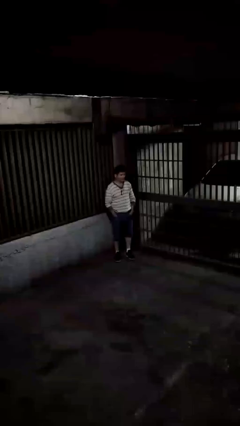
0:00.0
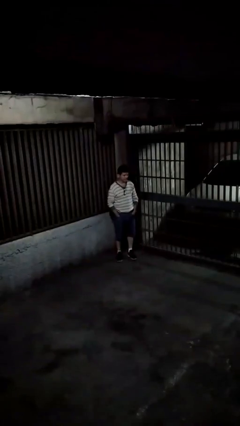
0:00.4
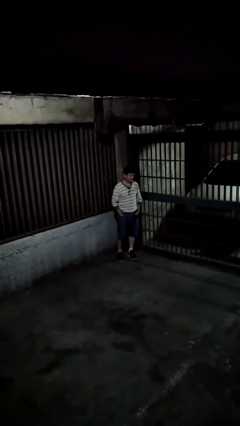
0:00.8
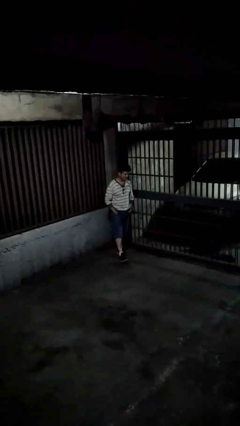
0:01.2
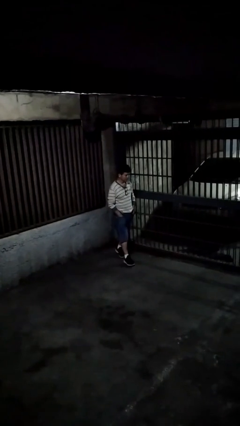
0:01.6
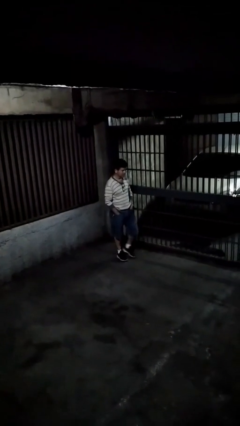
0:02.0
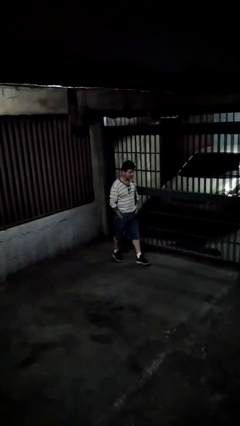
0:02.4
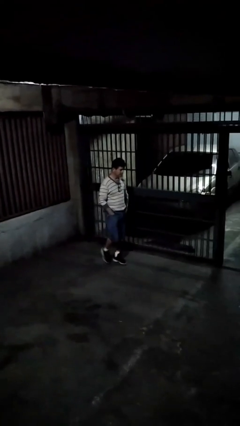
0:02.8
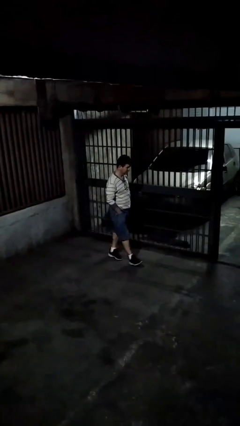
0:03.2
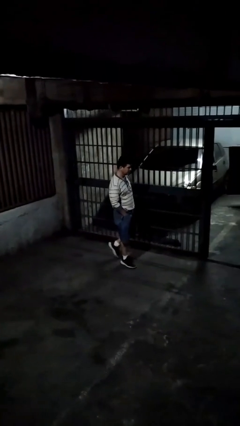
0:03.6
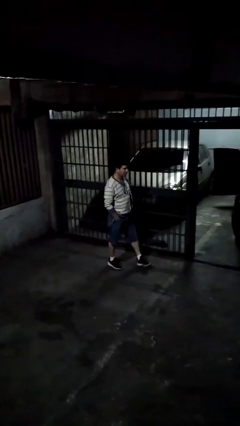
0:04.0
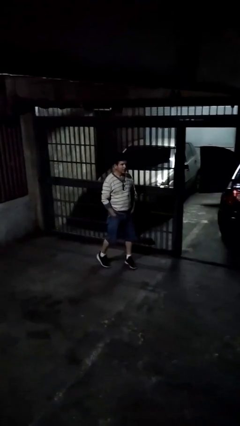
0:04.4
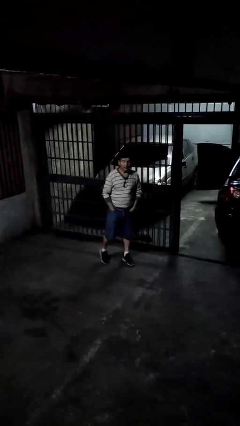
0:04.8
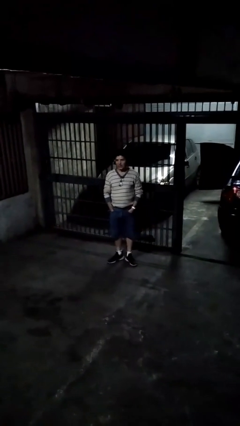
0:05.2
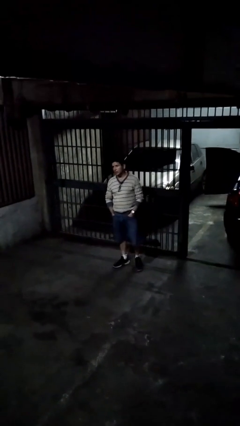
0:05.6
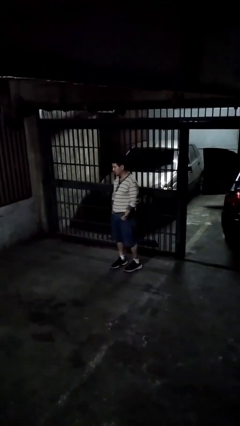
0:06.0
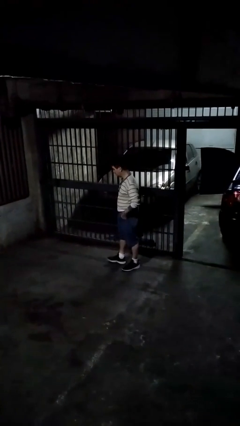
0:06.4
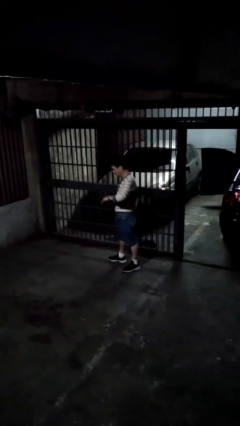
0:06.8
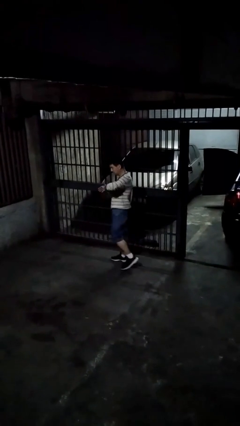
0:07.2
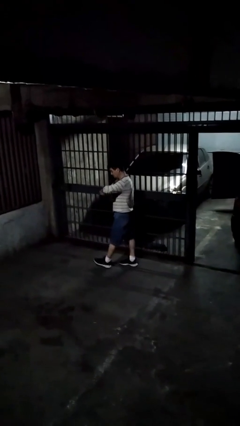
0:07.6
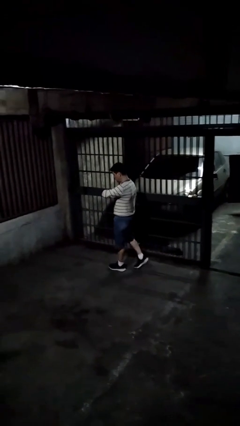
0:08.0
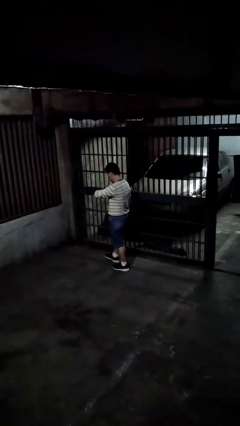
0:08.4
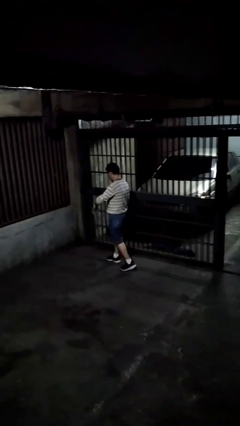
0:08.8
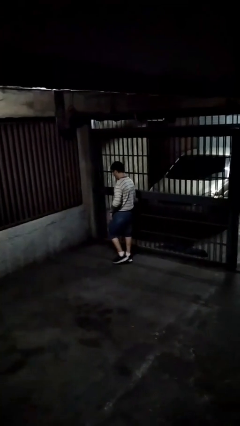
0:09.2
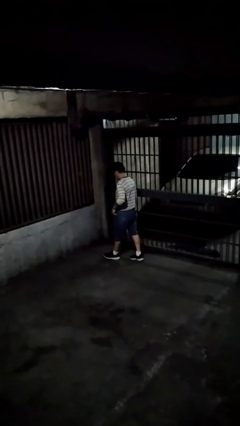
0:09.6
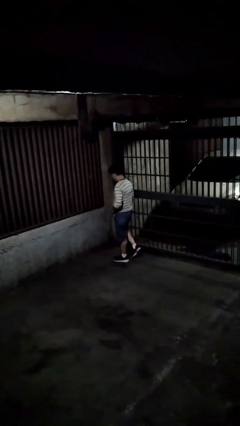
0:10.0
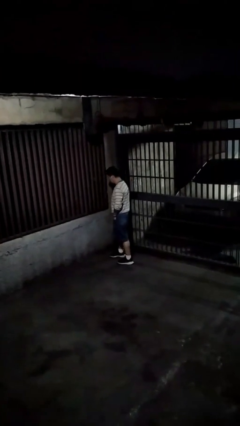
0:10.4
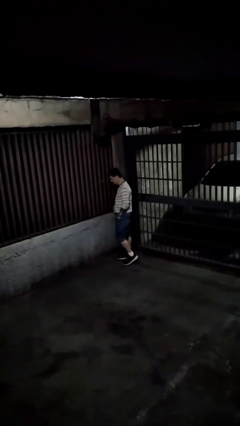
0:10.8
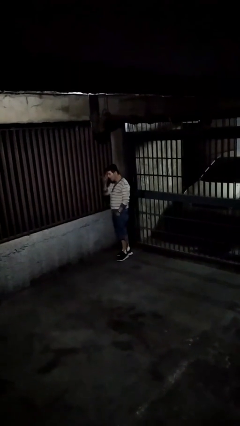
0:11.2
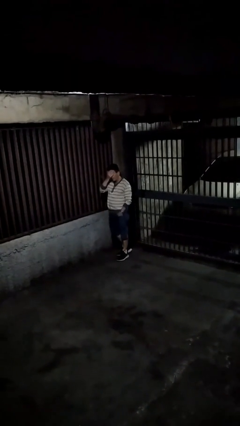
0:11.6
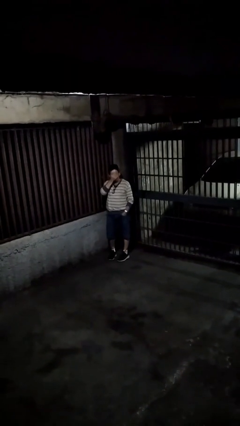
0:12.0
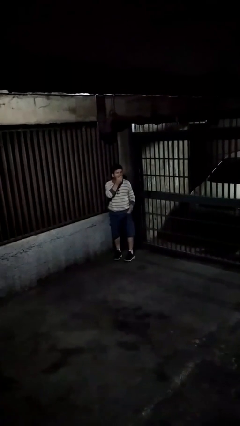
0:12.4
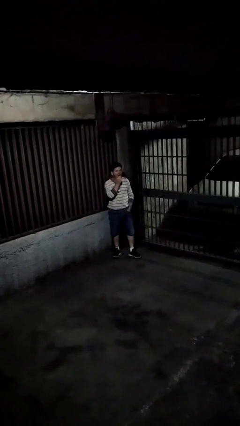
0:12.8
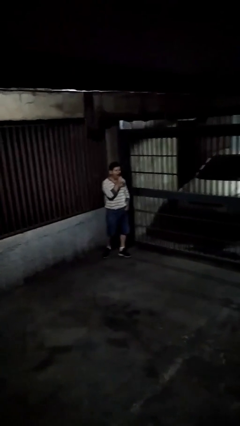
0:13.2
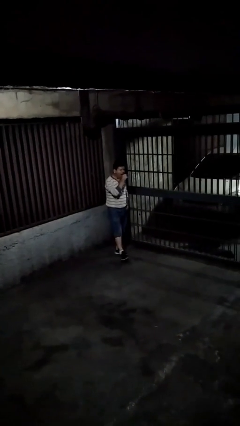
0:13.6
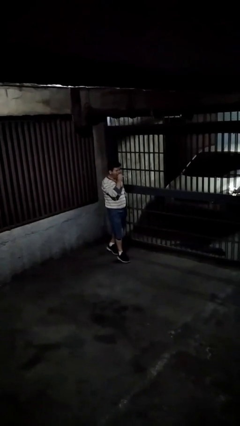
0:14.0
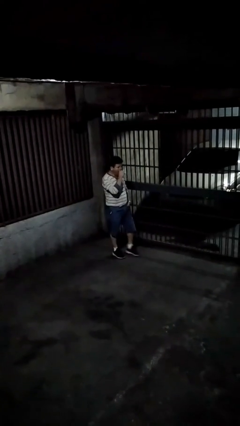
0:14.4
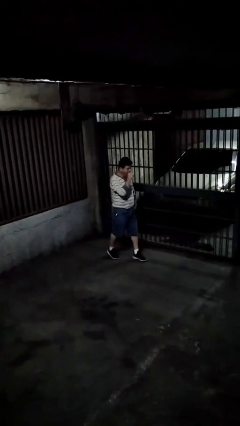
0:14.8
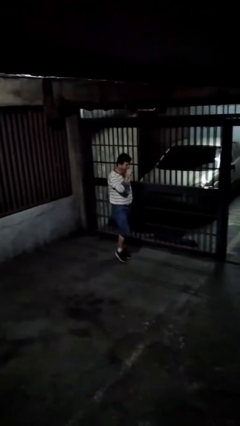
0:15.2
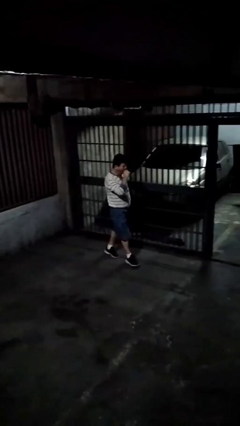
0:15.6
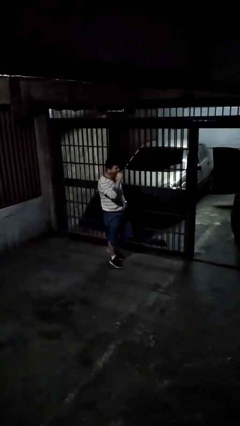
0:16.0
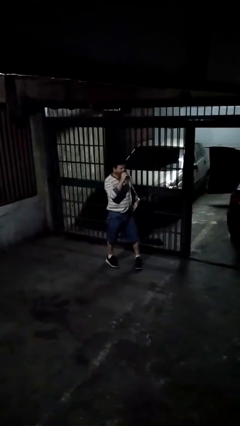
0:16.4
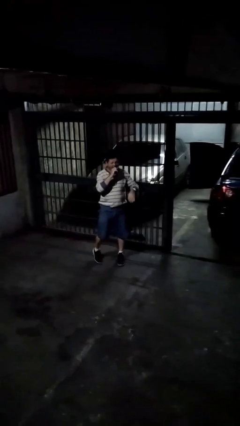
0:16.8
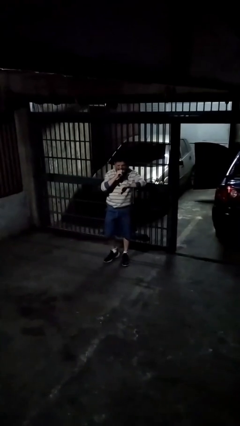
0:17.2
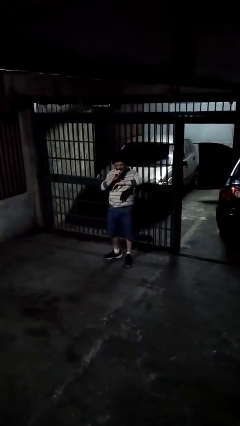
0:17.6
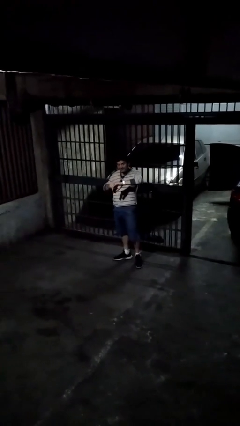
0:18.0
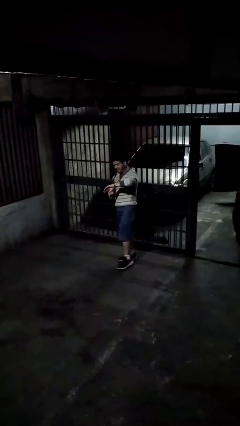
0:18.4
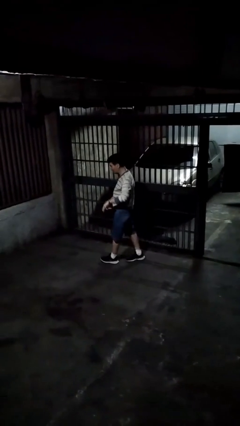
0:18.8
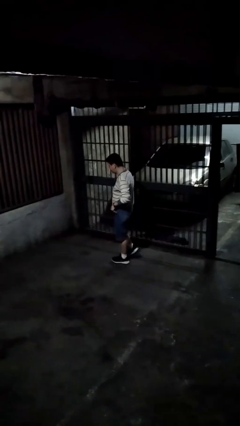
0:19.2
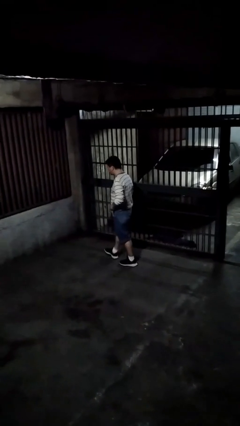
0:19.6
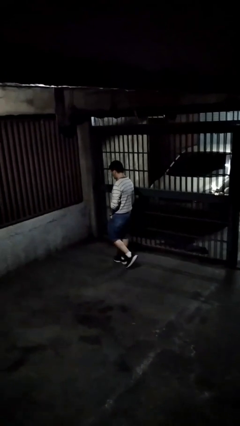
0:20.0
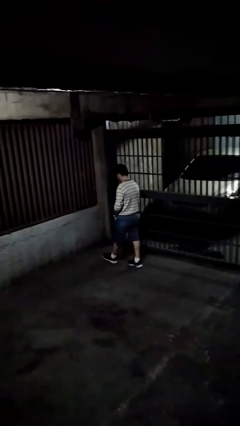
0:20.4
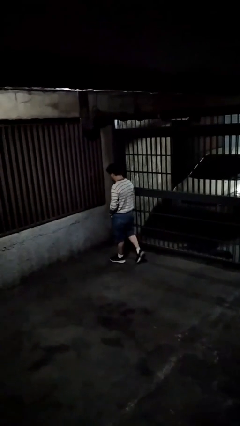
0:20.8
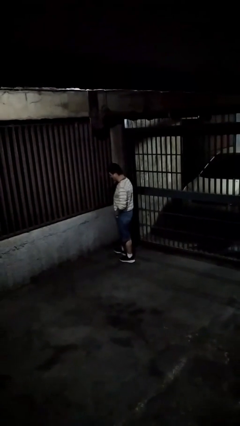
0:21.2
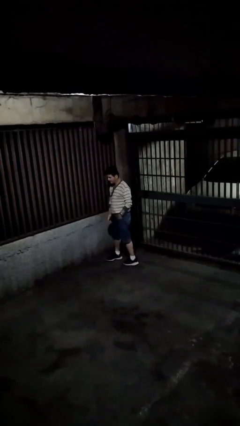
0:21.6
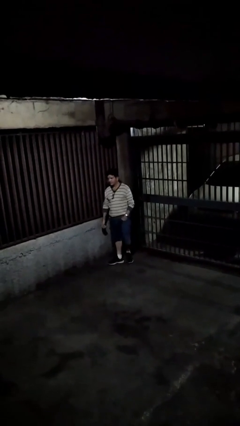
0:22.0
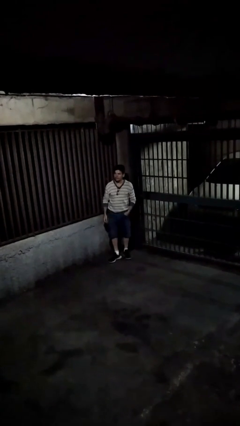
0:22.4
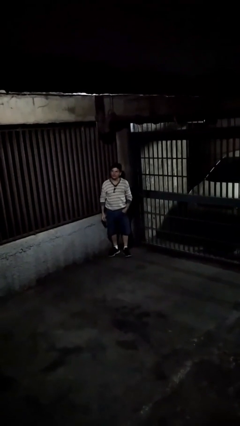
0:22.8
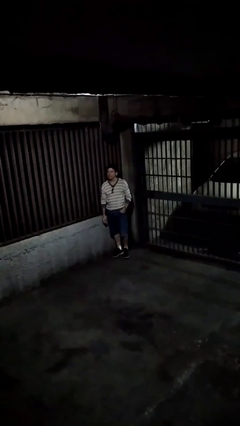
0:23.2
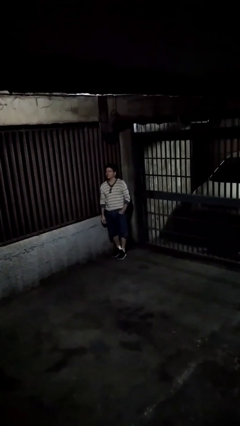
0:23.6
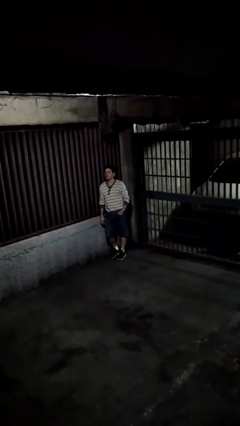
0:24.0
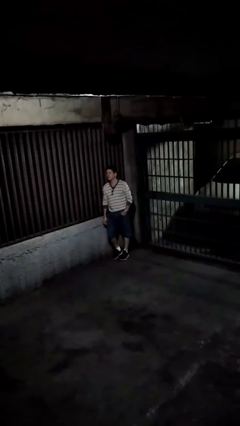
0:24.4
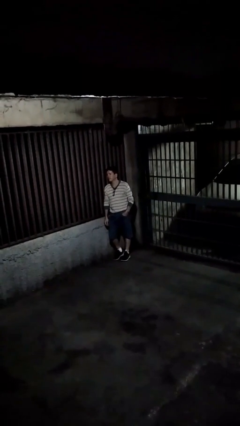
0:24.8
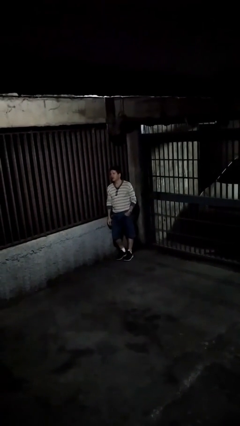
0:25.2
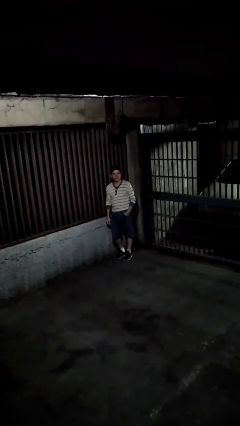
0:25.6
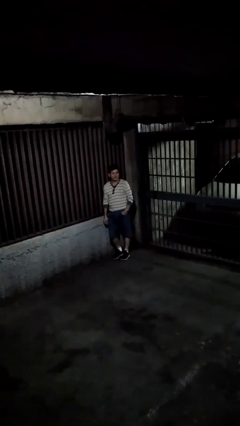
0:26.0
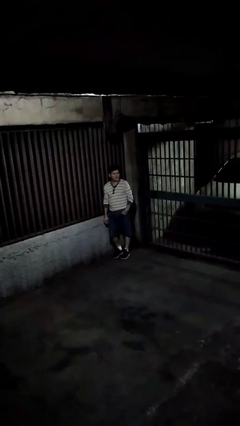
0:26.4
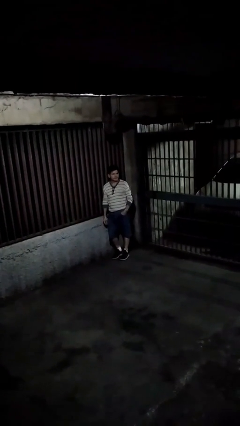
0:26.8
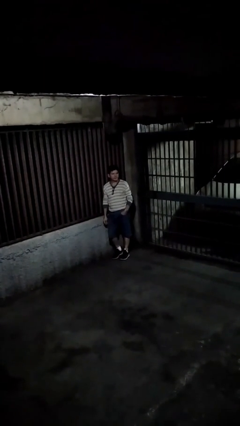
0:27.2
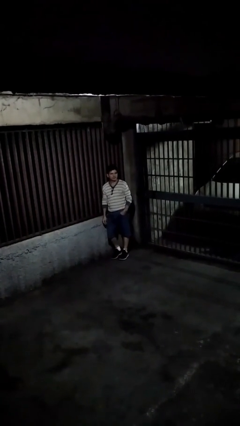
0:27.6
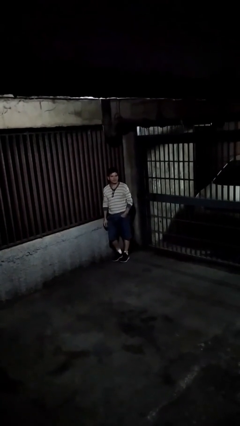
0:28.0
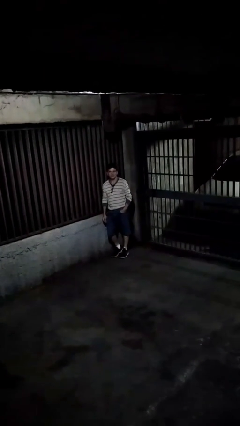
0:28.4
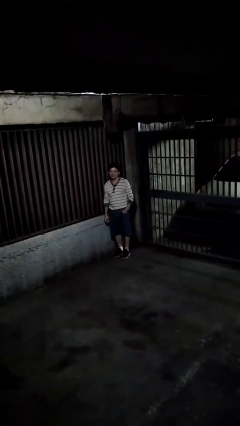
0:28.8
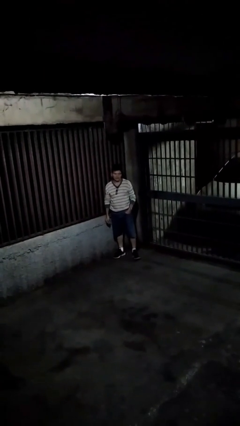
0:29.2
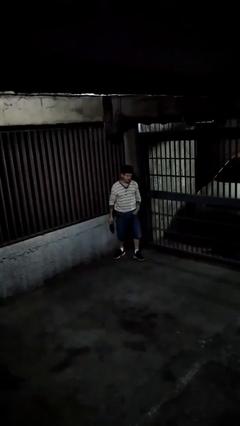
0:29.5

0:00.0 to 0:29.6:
person walks

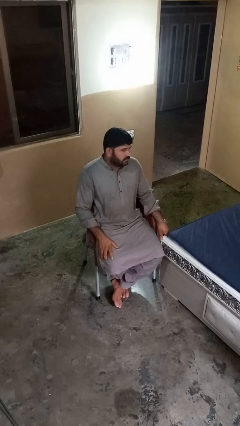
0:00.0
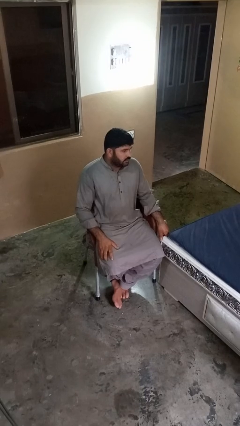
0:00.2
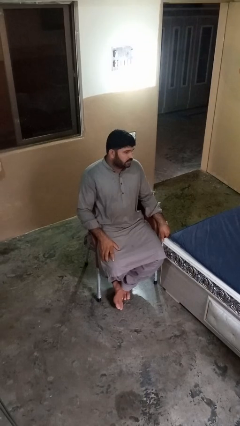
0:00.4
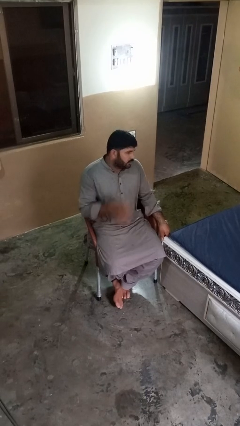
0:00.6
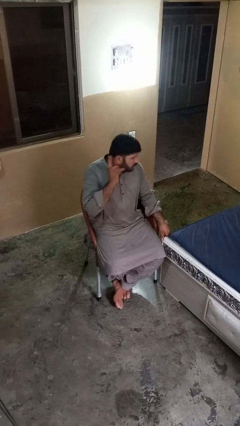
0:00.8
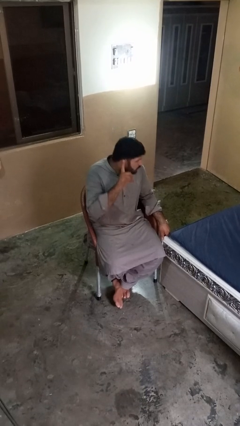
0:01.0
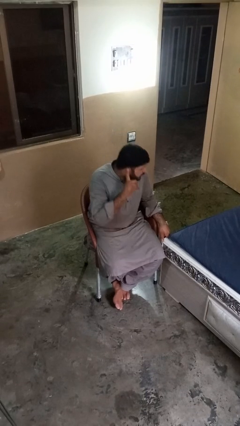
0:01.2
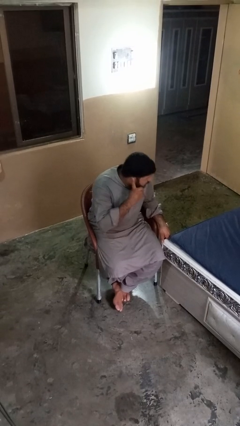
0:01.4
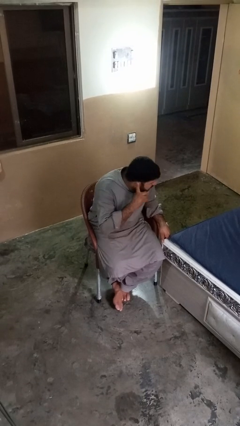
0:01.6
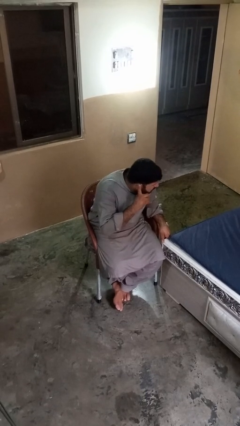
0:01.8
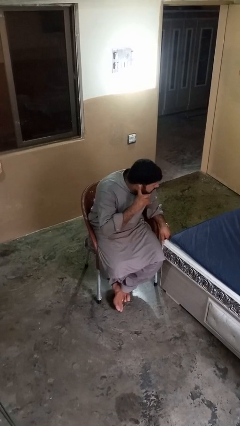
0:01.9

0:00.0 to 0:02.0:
person gestures listen closely

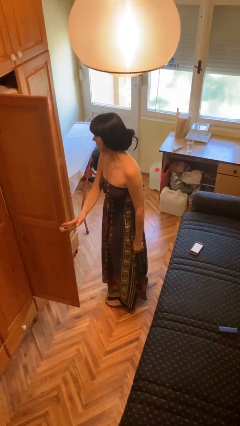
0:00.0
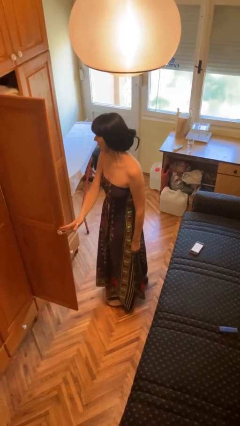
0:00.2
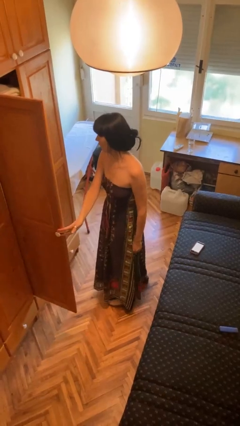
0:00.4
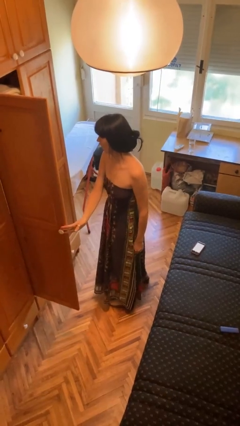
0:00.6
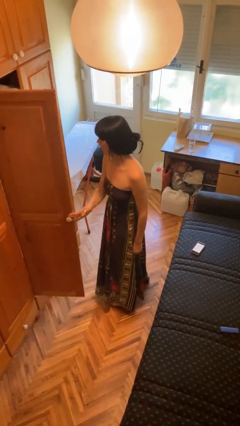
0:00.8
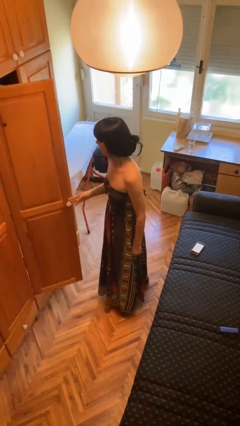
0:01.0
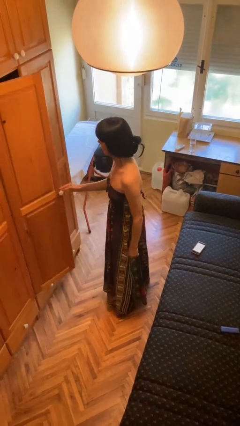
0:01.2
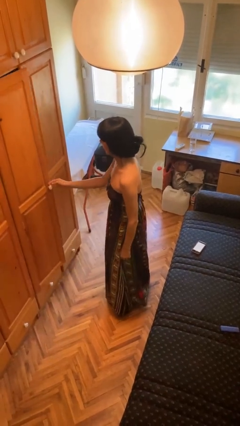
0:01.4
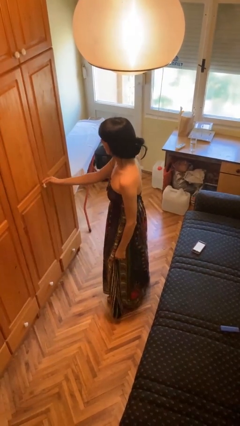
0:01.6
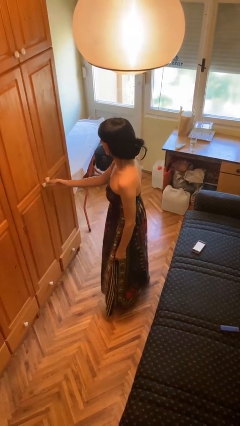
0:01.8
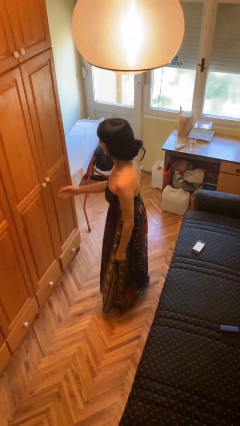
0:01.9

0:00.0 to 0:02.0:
person closes closet door
